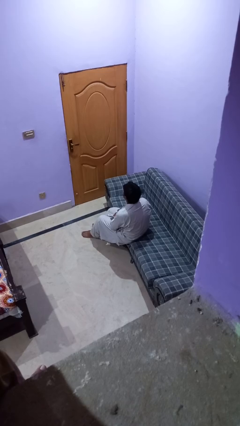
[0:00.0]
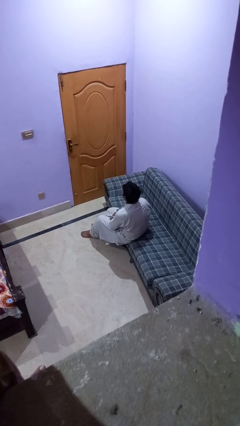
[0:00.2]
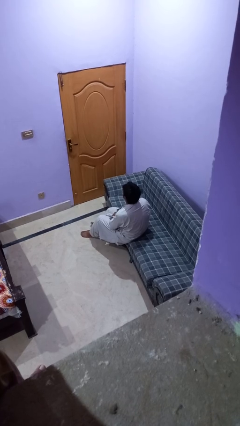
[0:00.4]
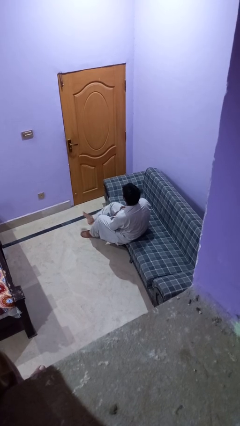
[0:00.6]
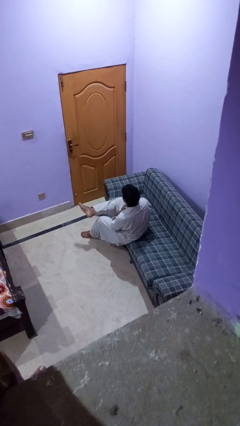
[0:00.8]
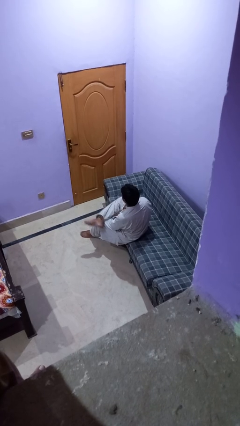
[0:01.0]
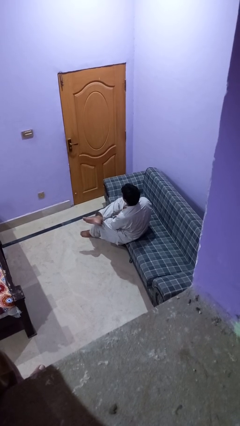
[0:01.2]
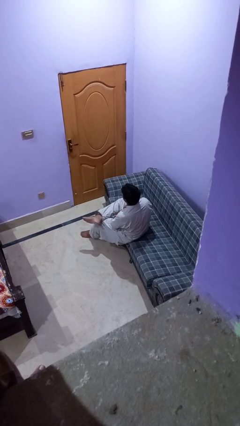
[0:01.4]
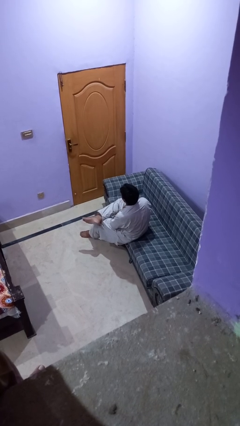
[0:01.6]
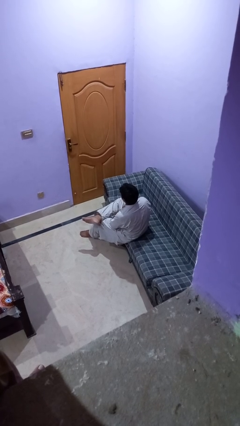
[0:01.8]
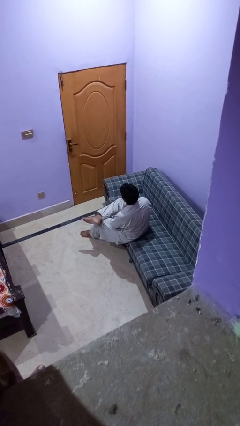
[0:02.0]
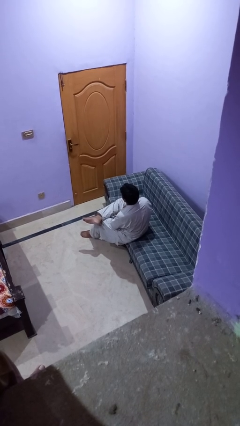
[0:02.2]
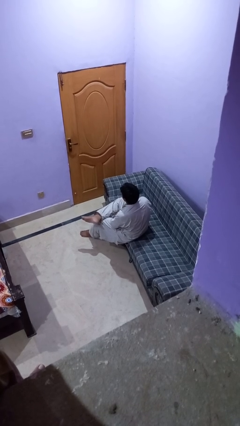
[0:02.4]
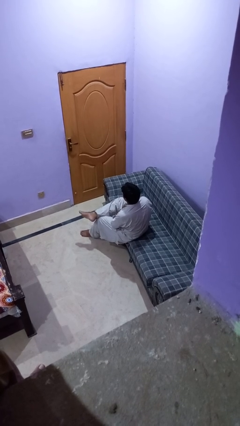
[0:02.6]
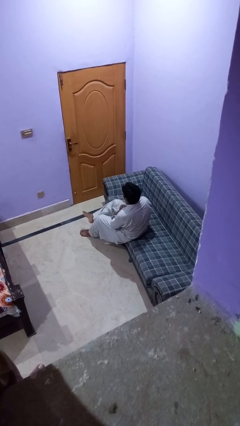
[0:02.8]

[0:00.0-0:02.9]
person crosses legs

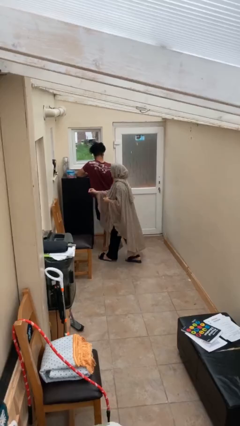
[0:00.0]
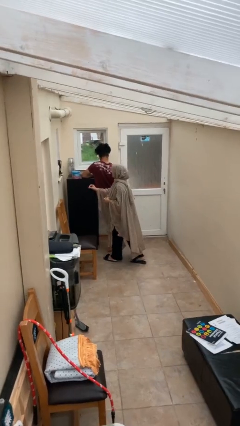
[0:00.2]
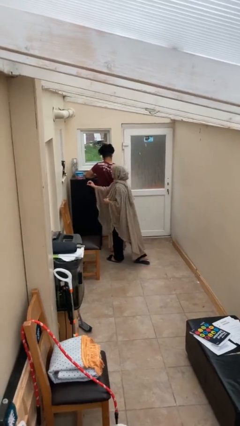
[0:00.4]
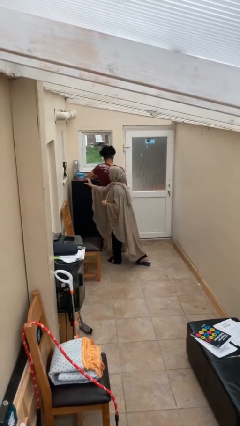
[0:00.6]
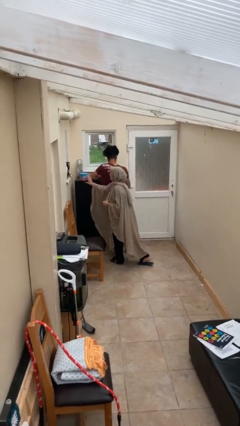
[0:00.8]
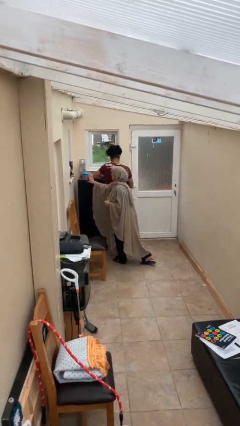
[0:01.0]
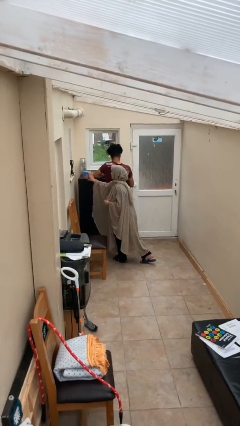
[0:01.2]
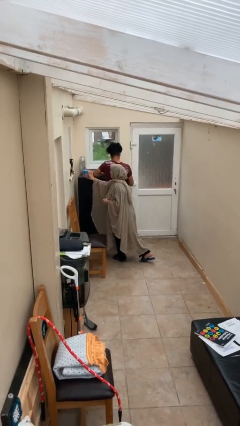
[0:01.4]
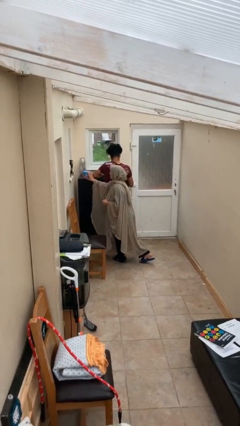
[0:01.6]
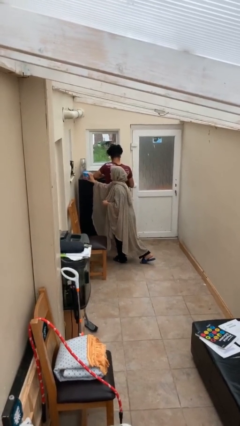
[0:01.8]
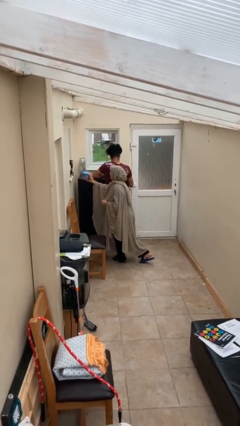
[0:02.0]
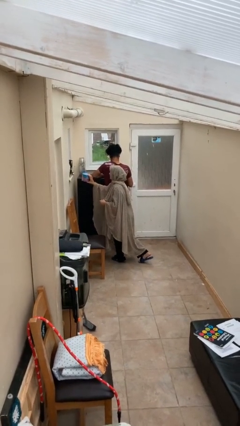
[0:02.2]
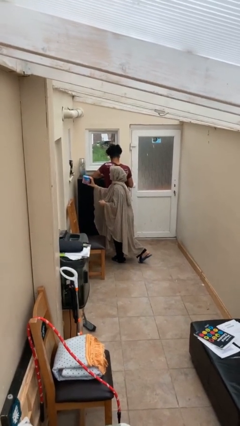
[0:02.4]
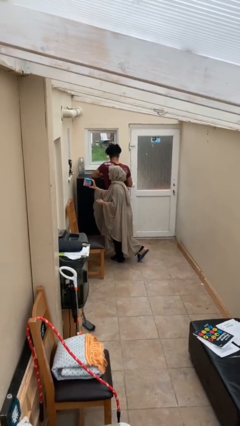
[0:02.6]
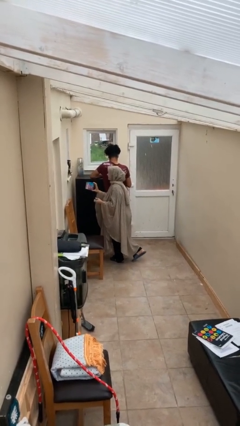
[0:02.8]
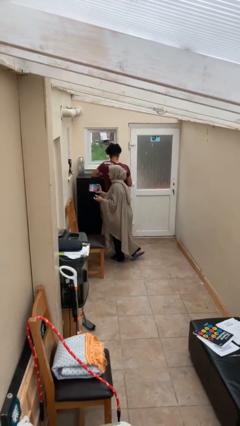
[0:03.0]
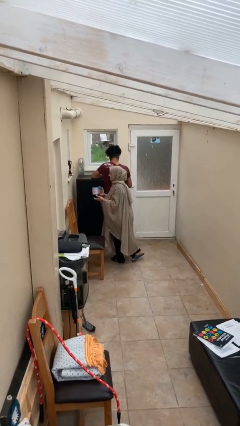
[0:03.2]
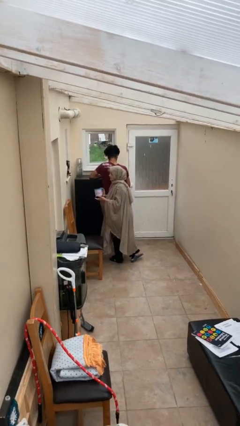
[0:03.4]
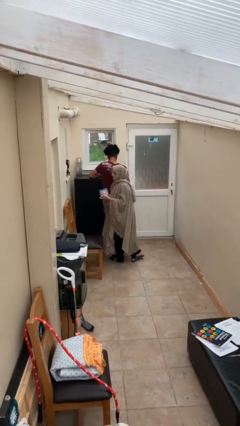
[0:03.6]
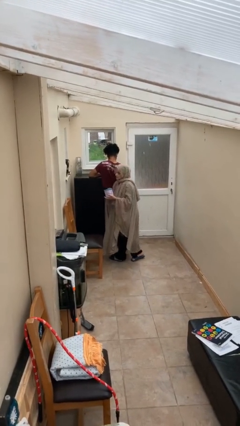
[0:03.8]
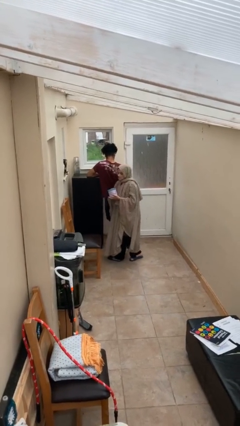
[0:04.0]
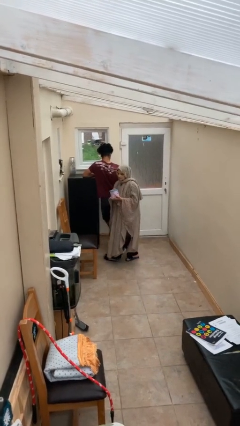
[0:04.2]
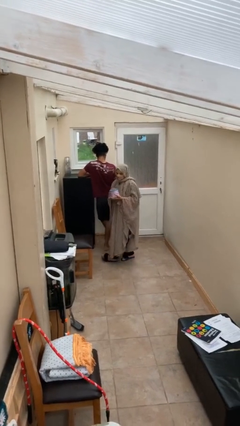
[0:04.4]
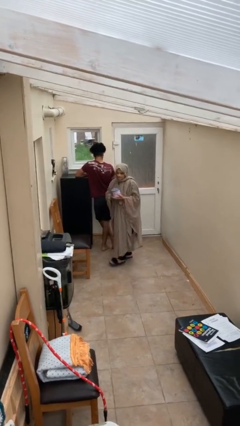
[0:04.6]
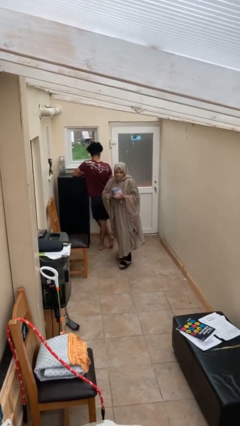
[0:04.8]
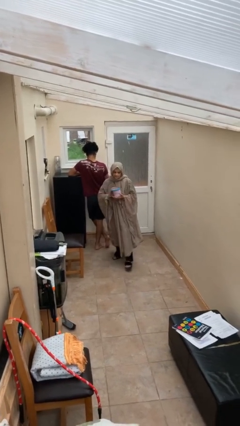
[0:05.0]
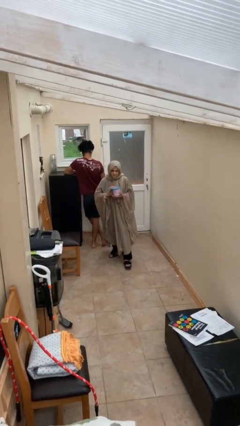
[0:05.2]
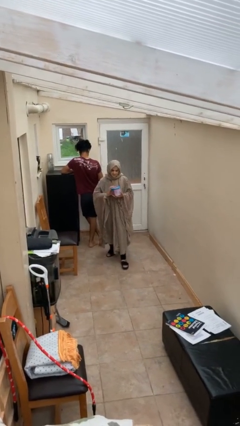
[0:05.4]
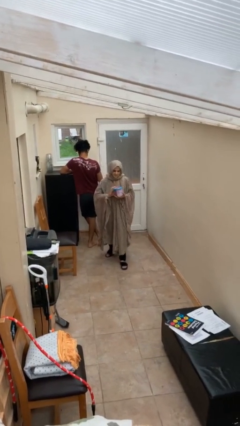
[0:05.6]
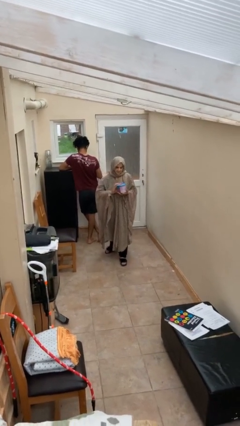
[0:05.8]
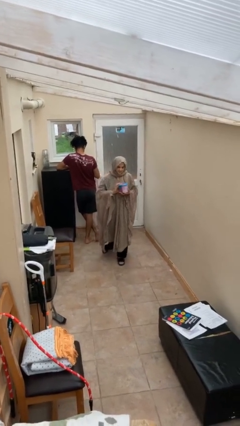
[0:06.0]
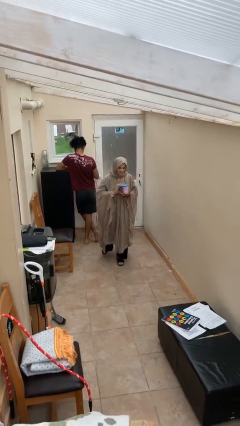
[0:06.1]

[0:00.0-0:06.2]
person steals object from person

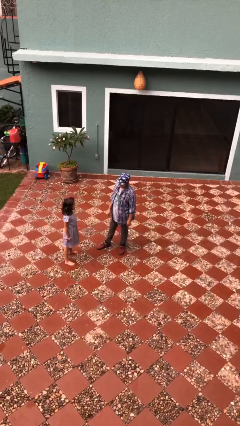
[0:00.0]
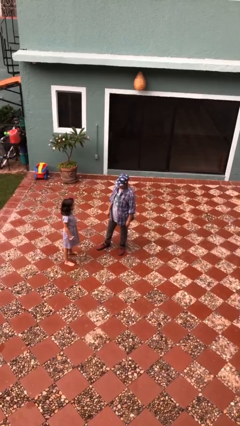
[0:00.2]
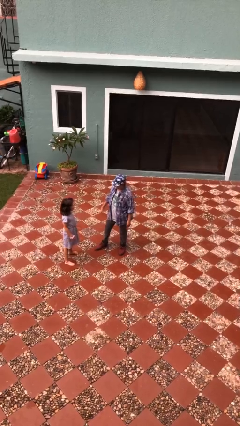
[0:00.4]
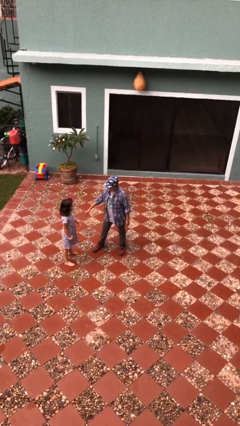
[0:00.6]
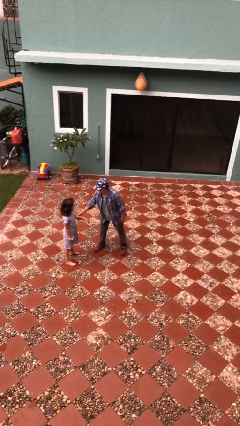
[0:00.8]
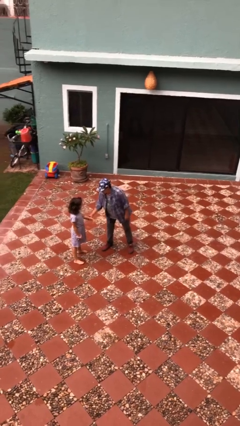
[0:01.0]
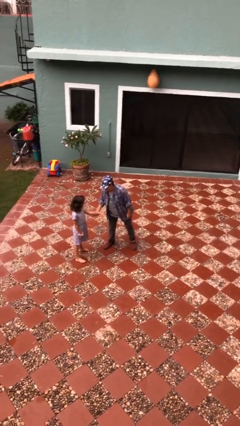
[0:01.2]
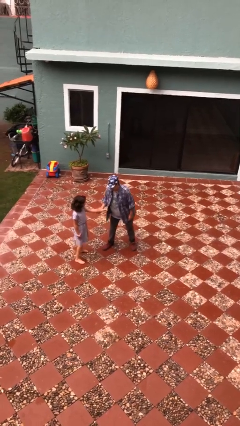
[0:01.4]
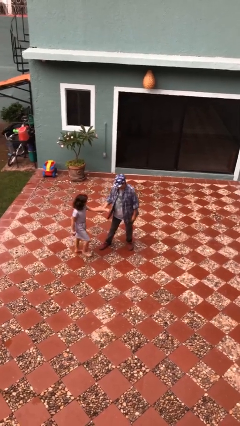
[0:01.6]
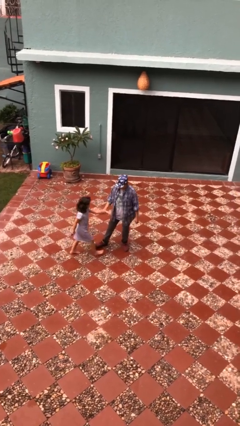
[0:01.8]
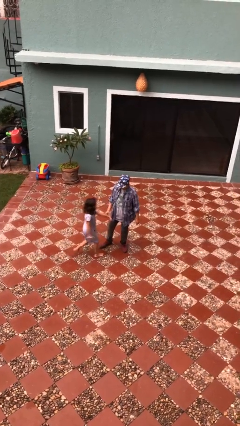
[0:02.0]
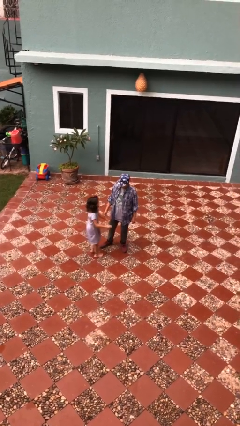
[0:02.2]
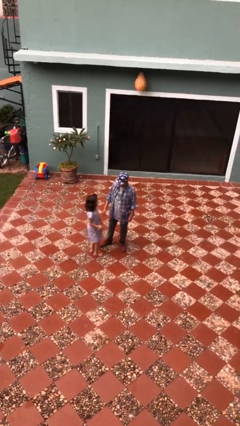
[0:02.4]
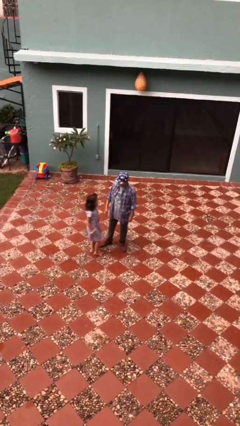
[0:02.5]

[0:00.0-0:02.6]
person grabs person by forearm

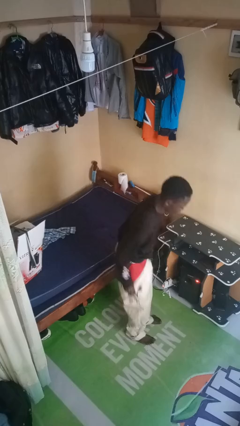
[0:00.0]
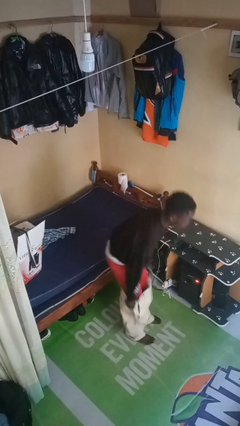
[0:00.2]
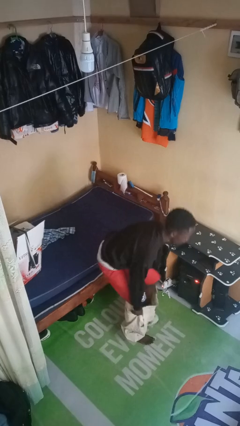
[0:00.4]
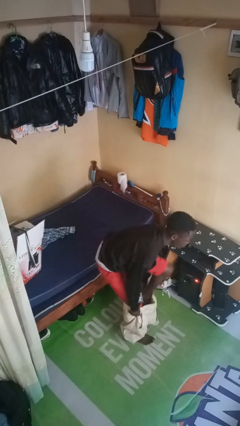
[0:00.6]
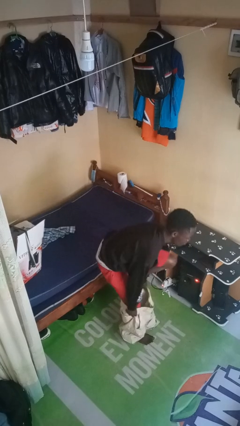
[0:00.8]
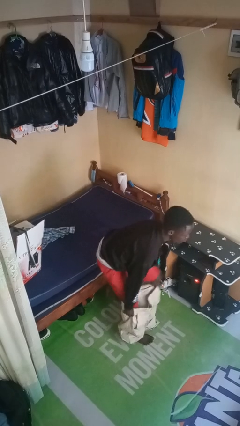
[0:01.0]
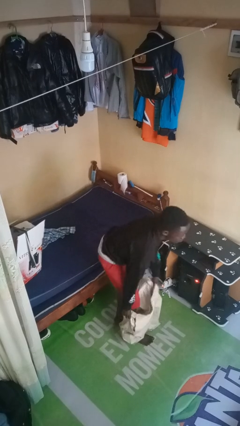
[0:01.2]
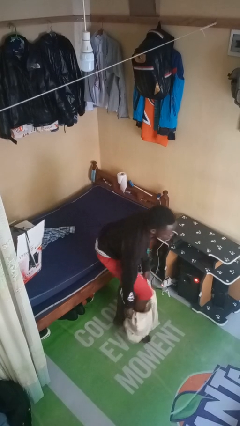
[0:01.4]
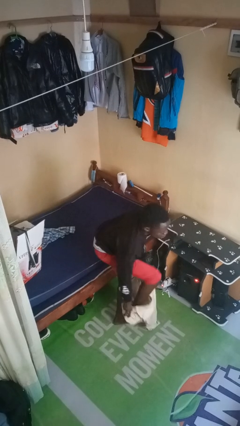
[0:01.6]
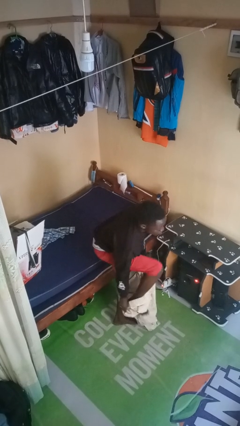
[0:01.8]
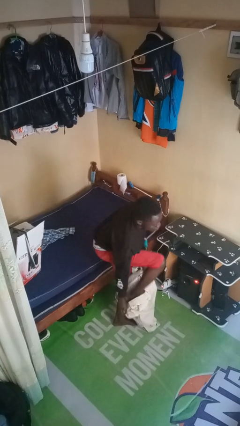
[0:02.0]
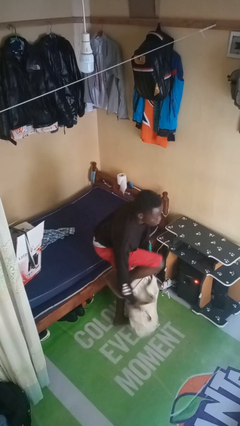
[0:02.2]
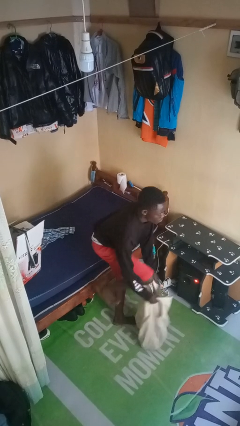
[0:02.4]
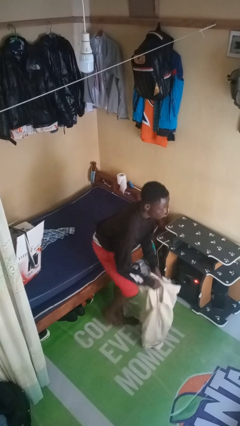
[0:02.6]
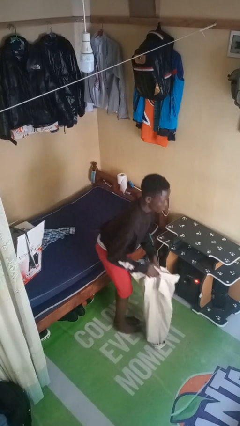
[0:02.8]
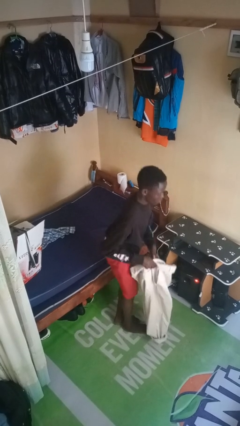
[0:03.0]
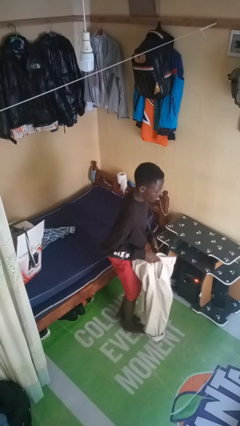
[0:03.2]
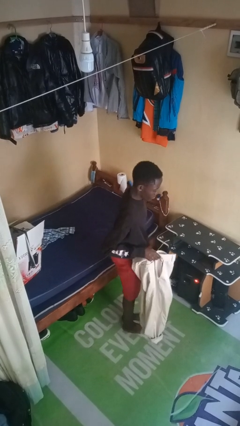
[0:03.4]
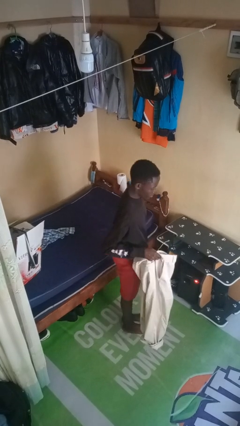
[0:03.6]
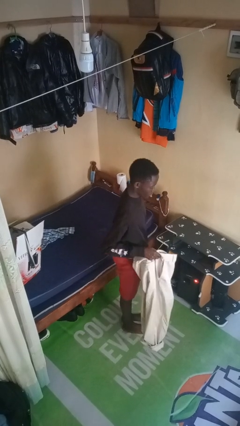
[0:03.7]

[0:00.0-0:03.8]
person takes off pants

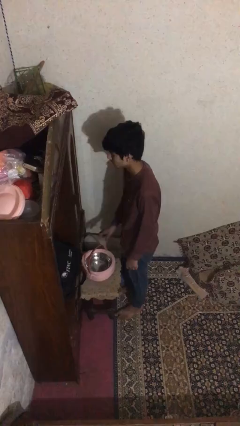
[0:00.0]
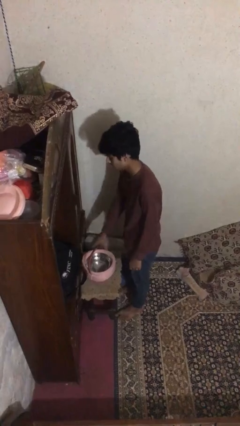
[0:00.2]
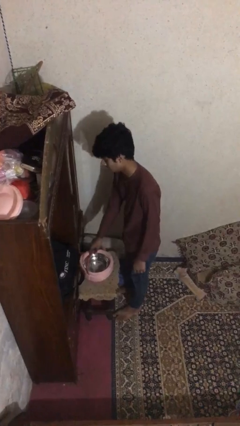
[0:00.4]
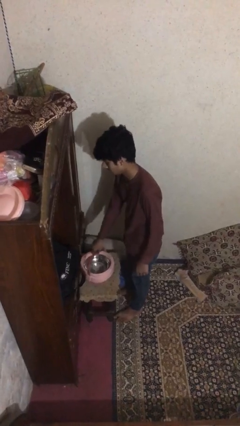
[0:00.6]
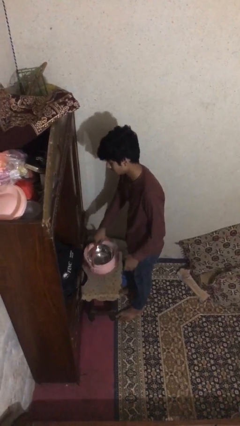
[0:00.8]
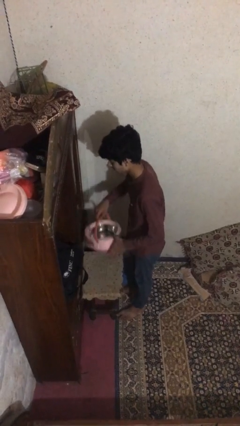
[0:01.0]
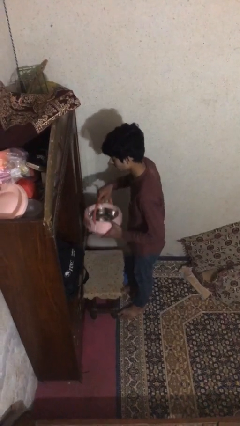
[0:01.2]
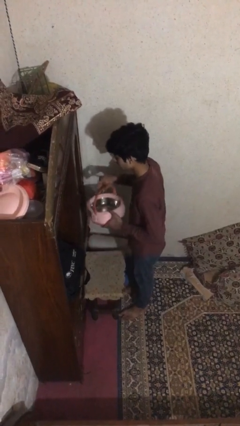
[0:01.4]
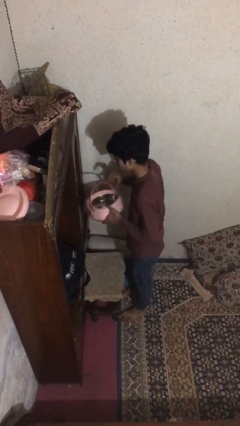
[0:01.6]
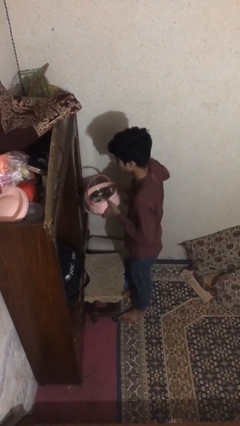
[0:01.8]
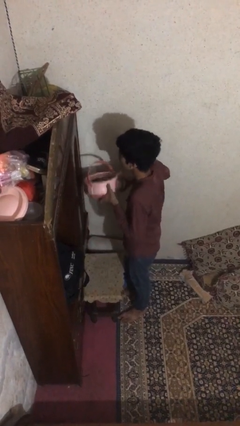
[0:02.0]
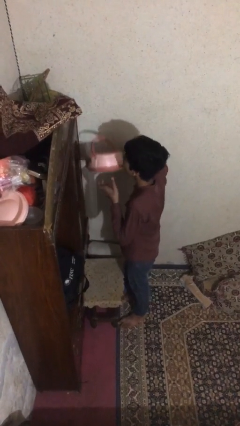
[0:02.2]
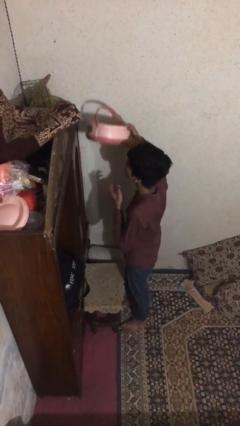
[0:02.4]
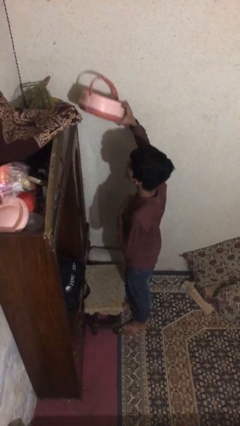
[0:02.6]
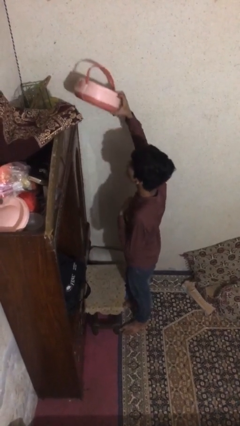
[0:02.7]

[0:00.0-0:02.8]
person picks up object from table
